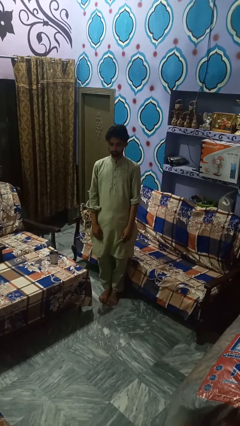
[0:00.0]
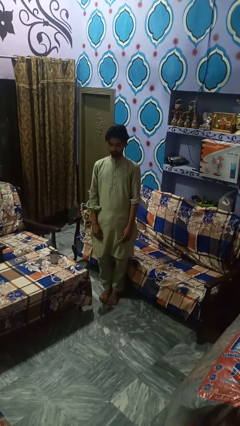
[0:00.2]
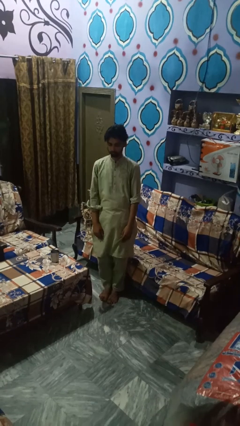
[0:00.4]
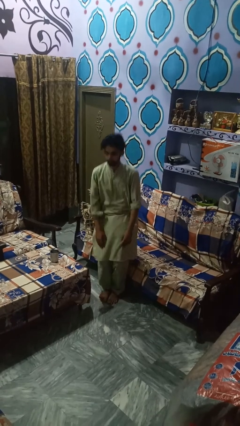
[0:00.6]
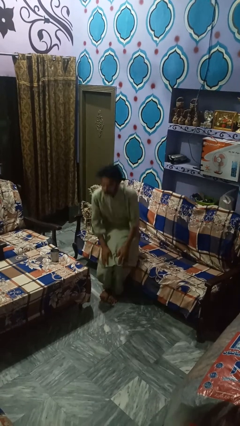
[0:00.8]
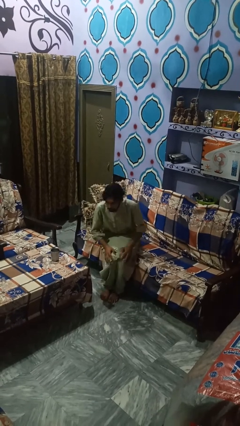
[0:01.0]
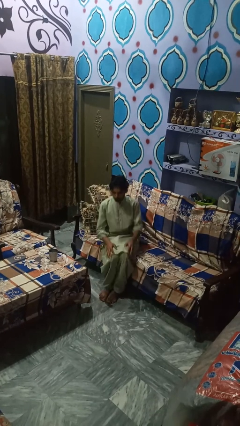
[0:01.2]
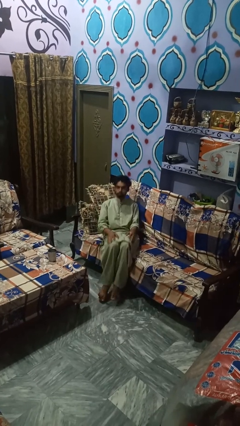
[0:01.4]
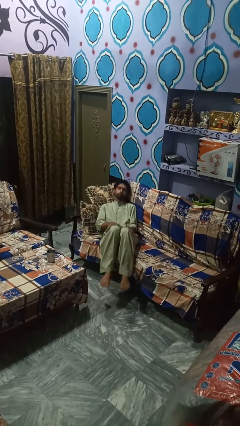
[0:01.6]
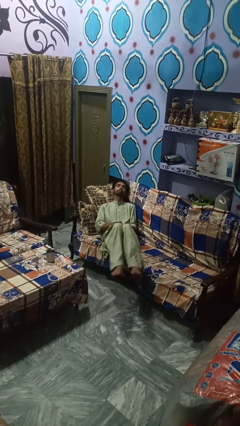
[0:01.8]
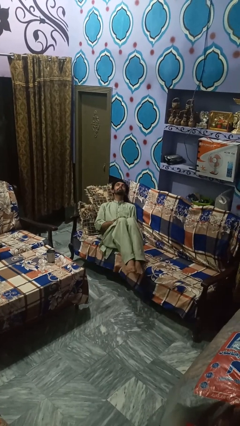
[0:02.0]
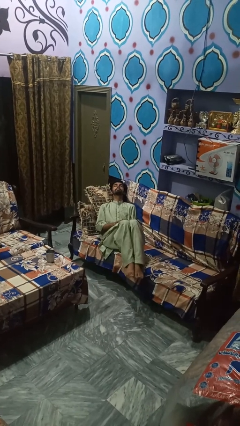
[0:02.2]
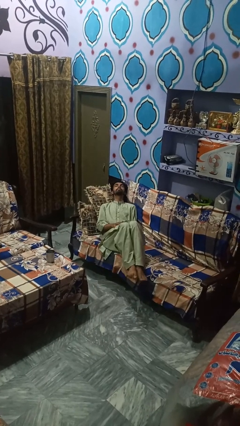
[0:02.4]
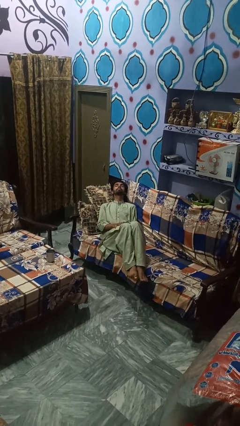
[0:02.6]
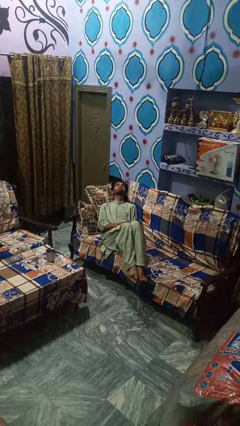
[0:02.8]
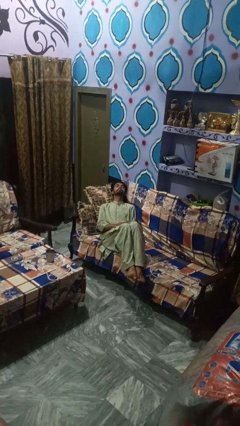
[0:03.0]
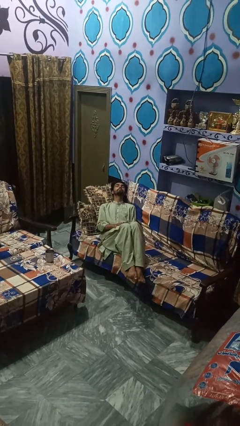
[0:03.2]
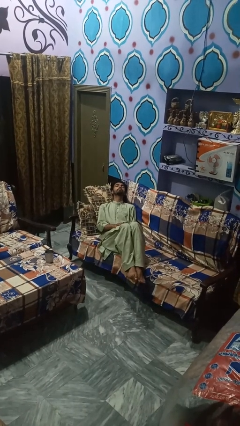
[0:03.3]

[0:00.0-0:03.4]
person lies down on couch

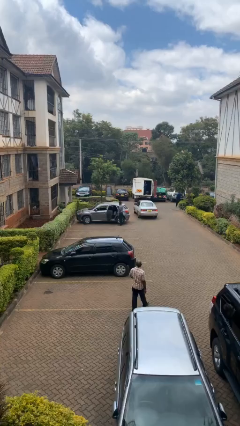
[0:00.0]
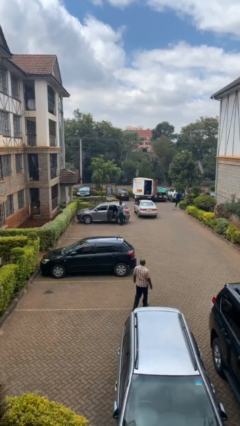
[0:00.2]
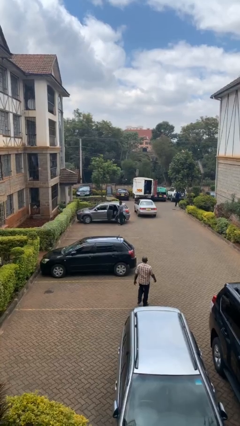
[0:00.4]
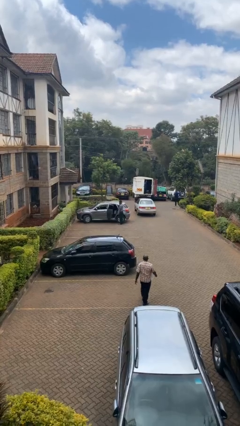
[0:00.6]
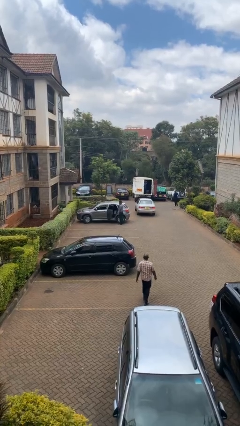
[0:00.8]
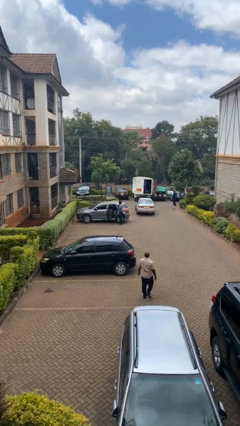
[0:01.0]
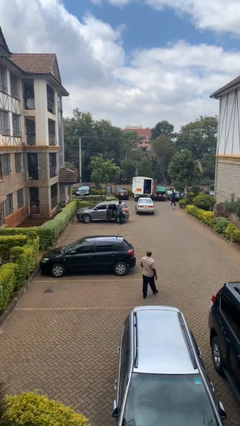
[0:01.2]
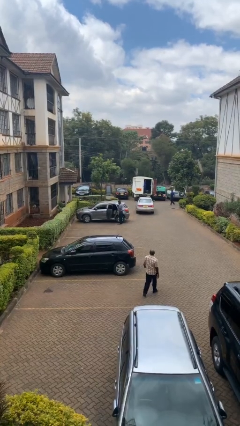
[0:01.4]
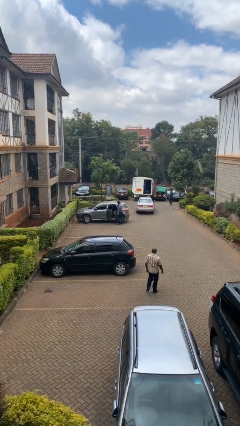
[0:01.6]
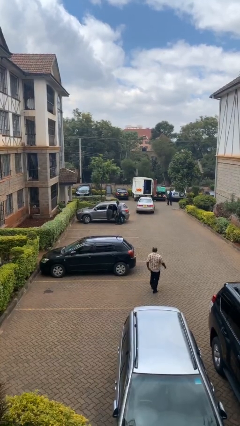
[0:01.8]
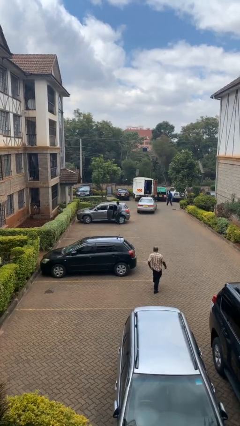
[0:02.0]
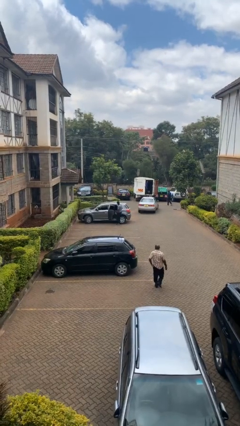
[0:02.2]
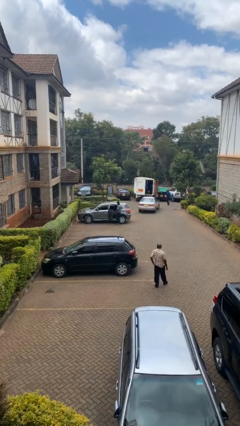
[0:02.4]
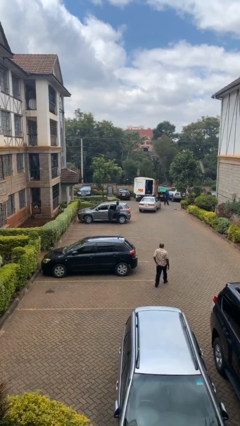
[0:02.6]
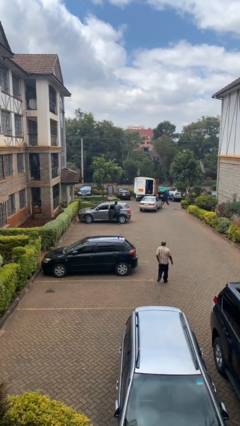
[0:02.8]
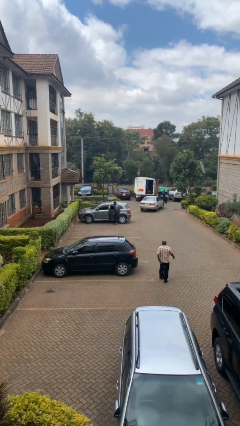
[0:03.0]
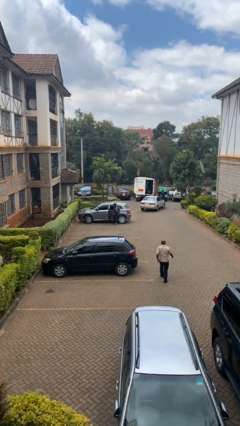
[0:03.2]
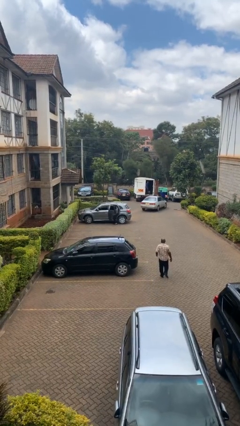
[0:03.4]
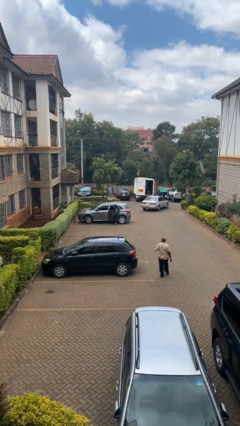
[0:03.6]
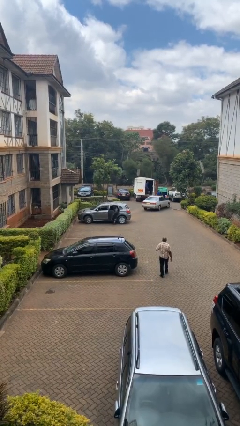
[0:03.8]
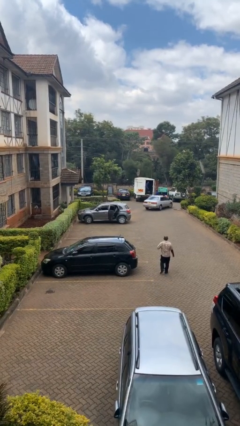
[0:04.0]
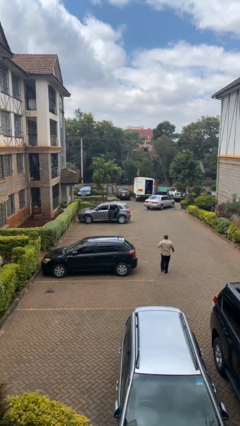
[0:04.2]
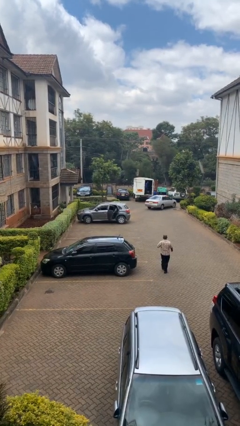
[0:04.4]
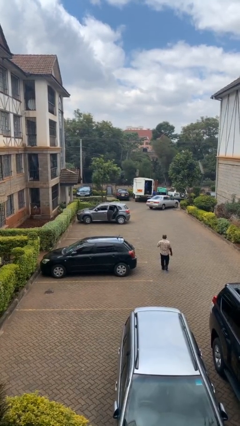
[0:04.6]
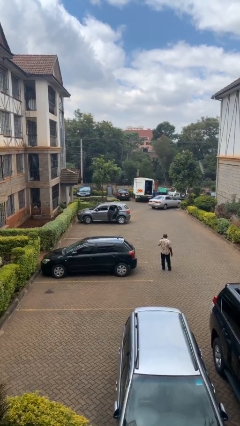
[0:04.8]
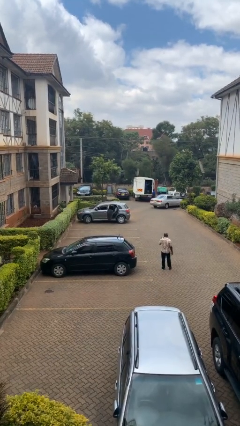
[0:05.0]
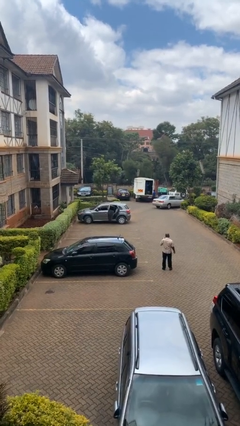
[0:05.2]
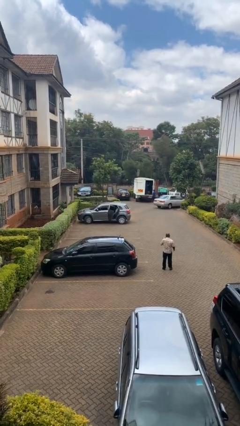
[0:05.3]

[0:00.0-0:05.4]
person enters car

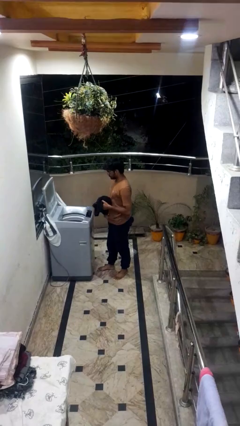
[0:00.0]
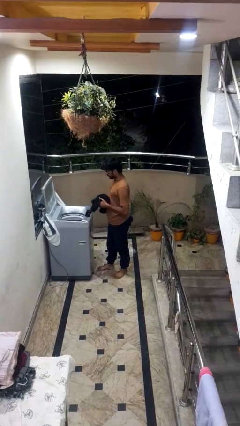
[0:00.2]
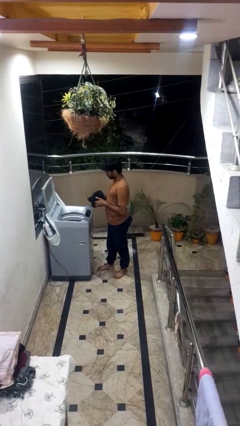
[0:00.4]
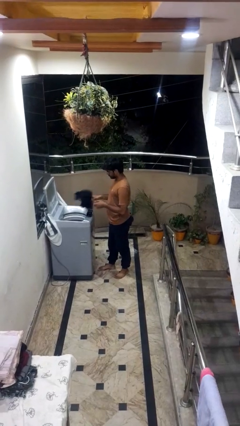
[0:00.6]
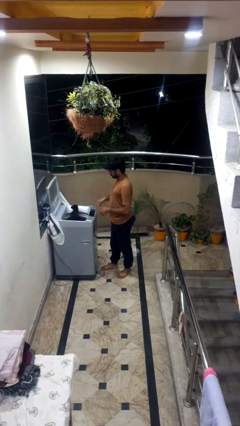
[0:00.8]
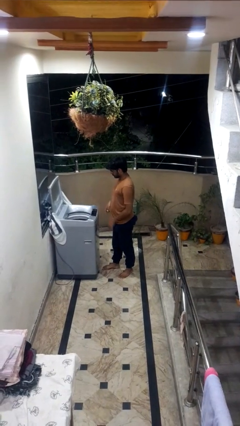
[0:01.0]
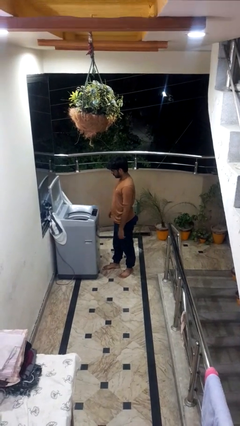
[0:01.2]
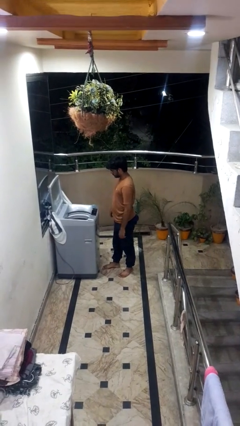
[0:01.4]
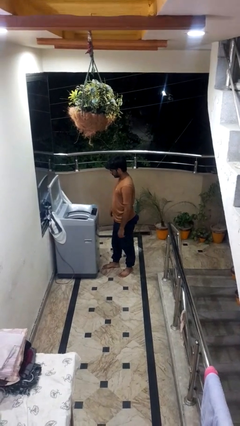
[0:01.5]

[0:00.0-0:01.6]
person loads clotheswasher

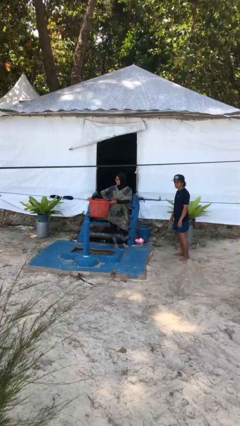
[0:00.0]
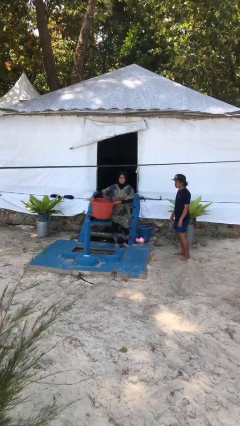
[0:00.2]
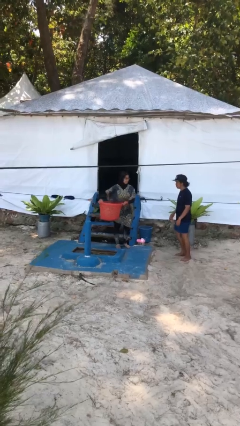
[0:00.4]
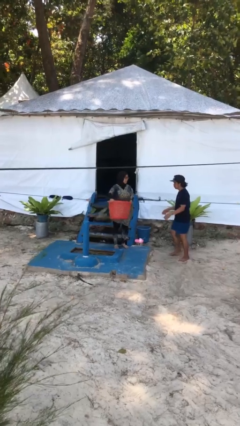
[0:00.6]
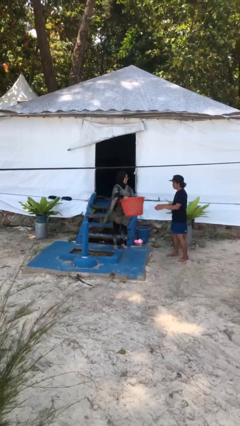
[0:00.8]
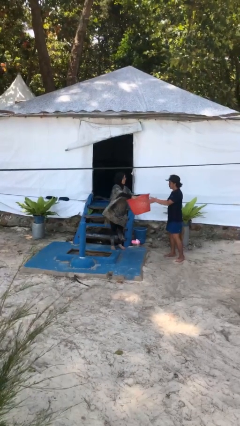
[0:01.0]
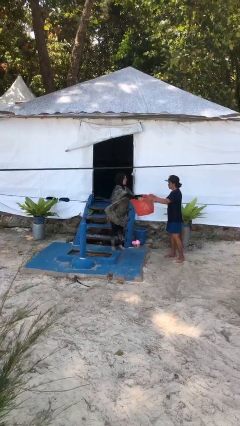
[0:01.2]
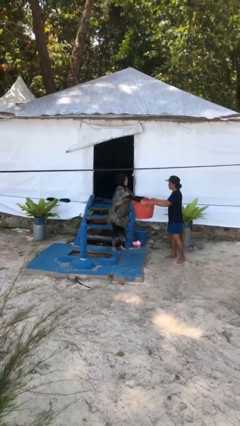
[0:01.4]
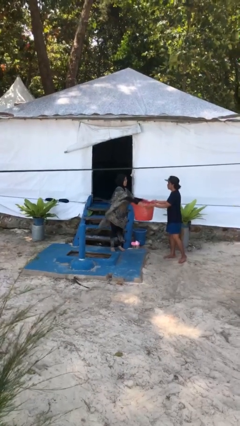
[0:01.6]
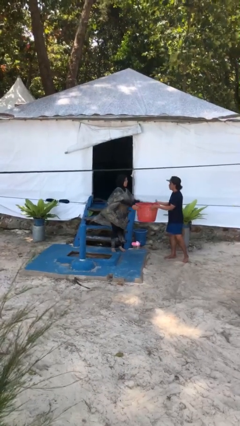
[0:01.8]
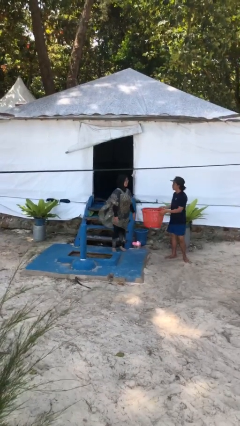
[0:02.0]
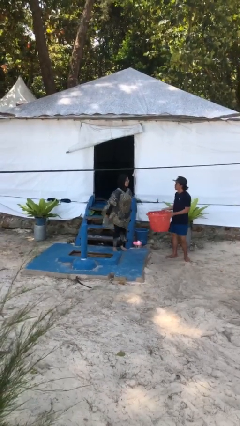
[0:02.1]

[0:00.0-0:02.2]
person transfers object to person

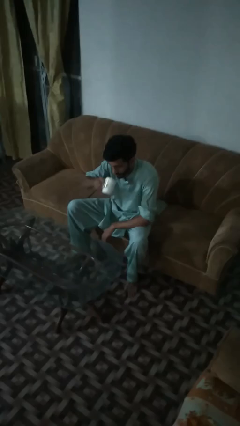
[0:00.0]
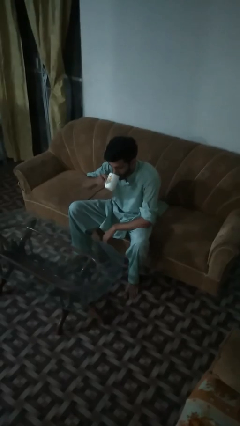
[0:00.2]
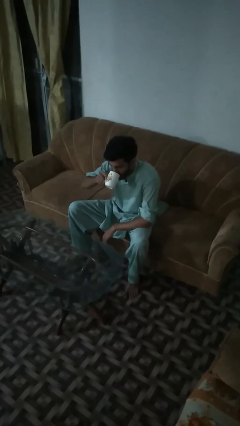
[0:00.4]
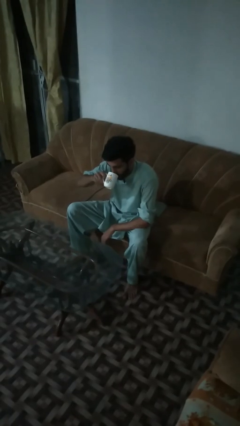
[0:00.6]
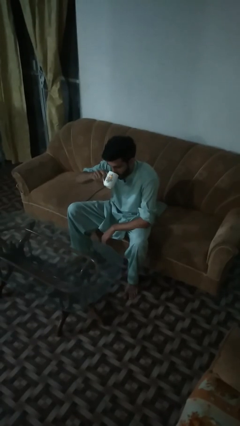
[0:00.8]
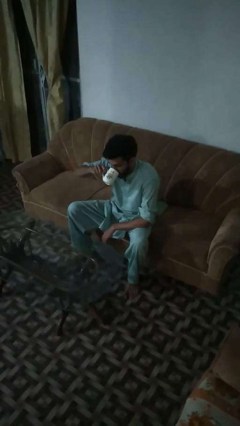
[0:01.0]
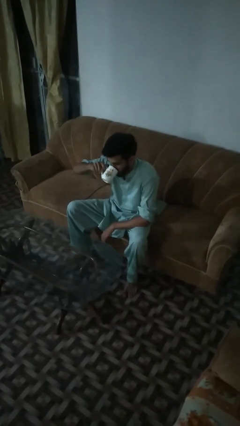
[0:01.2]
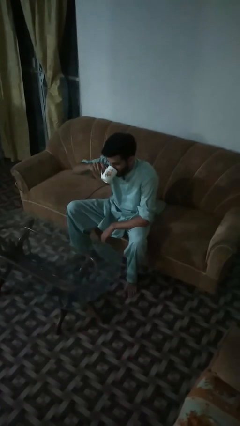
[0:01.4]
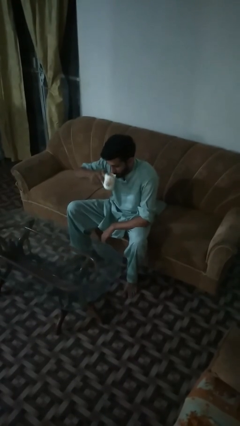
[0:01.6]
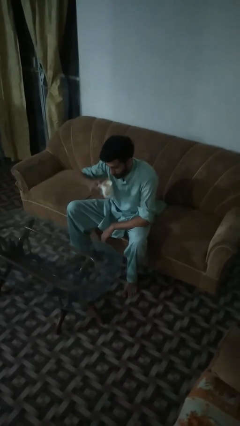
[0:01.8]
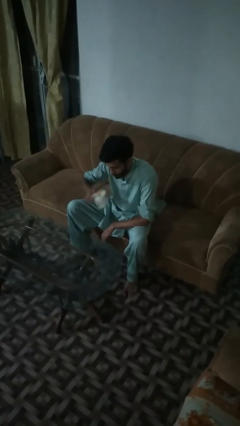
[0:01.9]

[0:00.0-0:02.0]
person drinks from mug

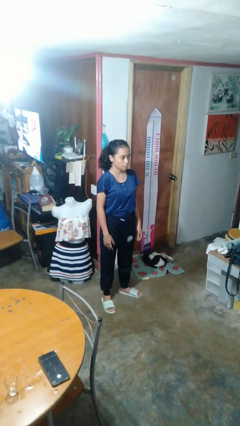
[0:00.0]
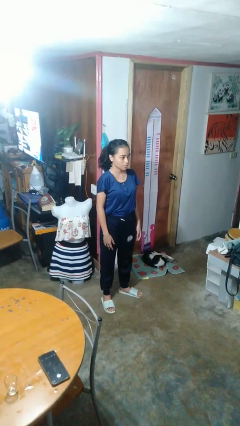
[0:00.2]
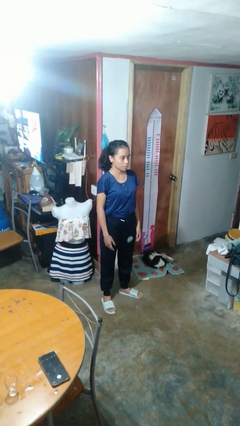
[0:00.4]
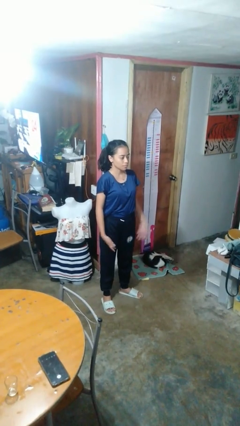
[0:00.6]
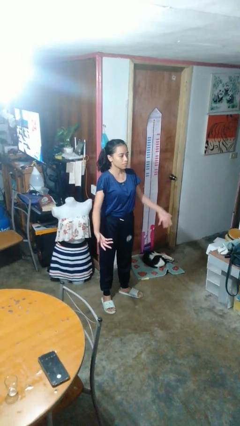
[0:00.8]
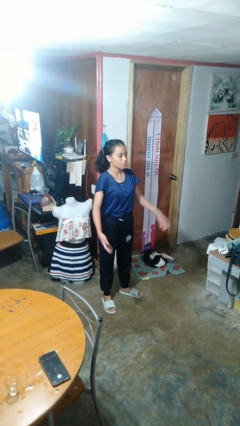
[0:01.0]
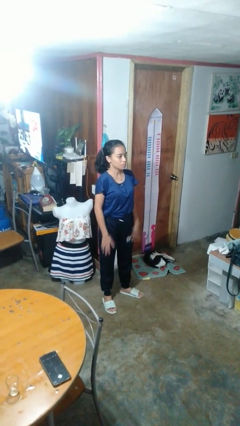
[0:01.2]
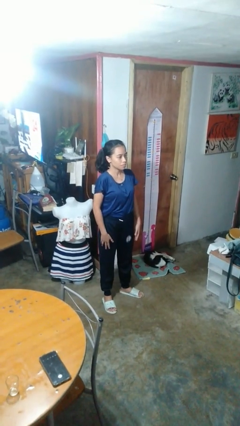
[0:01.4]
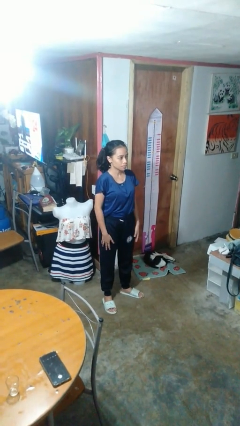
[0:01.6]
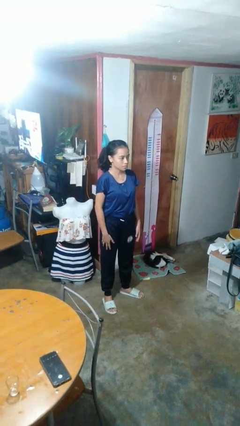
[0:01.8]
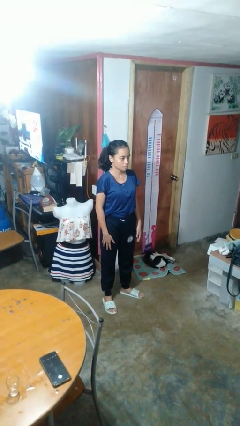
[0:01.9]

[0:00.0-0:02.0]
person slaps hands on thighs

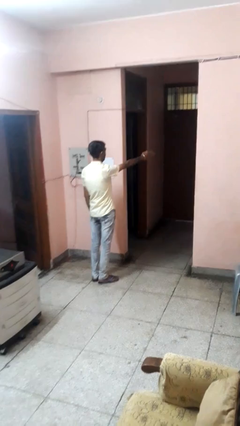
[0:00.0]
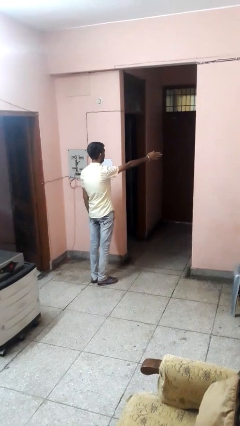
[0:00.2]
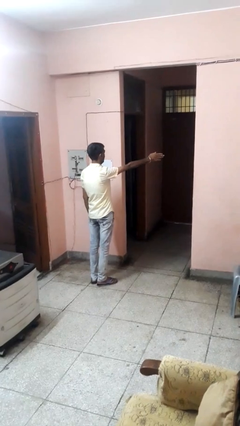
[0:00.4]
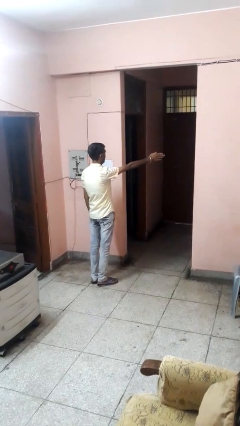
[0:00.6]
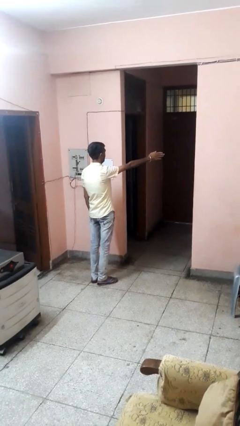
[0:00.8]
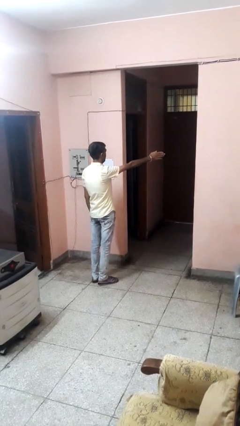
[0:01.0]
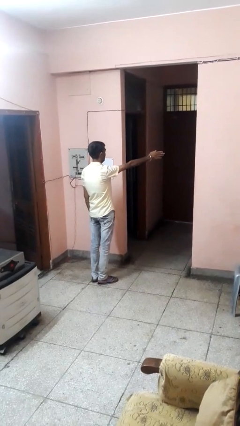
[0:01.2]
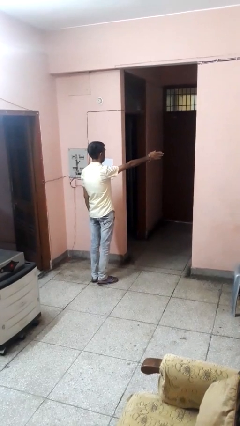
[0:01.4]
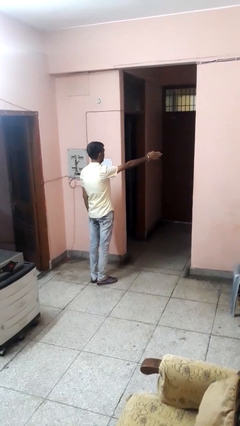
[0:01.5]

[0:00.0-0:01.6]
person gestures swipe left
